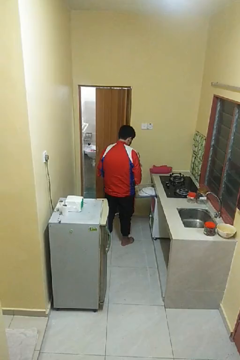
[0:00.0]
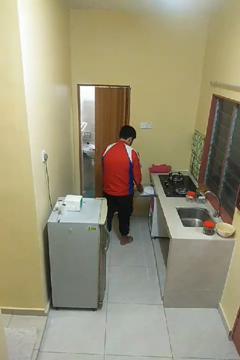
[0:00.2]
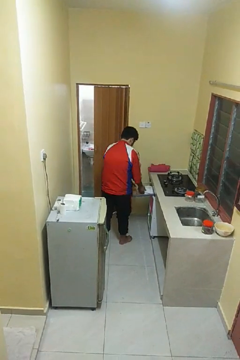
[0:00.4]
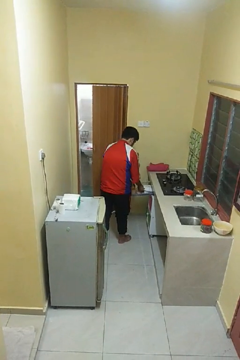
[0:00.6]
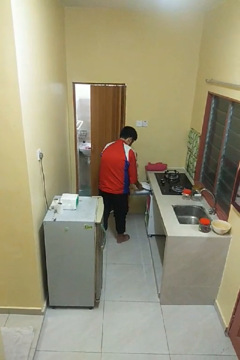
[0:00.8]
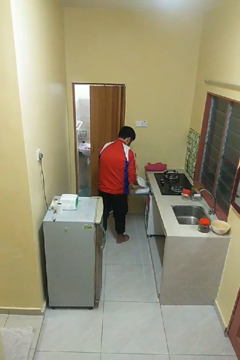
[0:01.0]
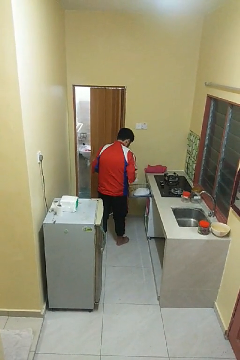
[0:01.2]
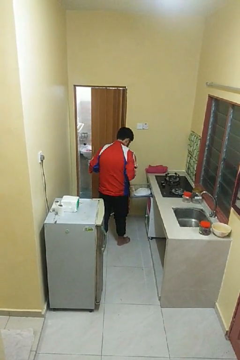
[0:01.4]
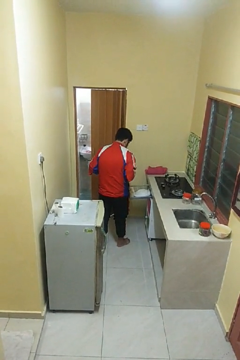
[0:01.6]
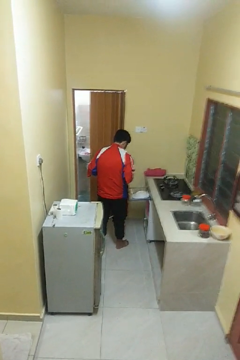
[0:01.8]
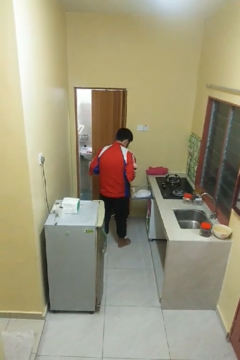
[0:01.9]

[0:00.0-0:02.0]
person takes object from kitchen drawer

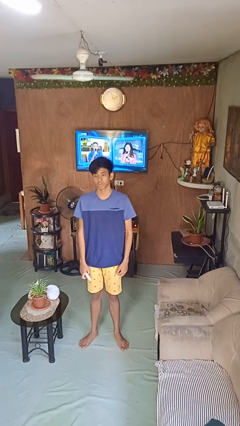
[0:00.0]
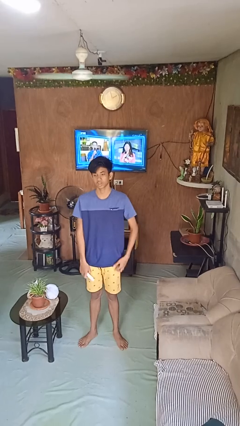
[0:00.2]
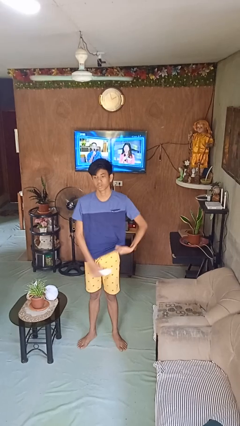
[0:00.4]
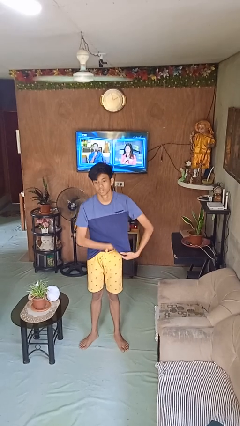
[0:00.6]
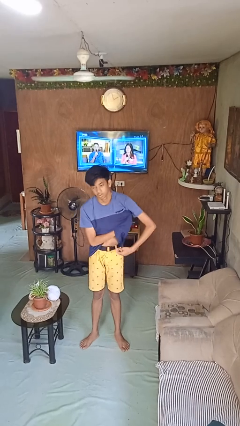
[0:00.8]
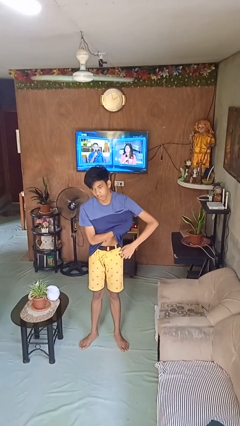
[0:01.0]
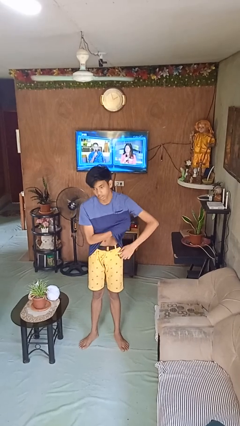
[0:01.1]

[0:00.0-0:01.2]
person applies deodorant

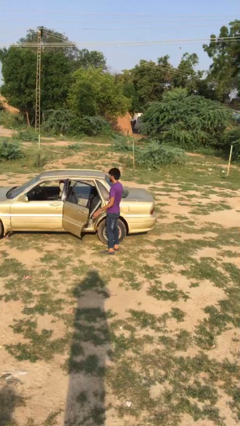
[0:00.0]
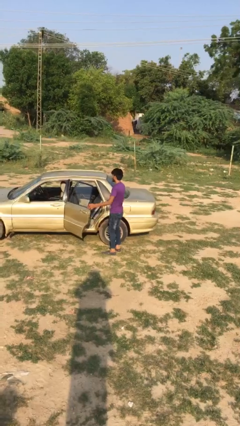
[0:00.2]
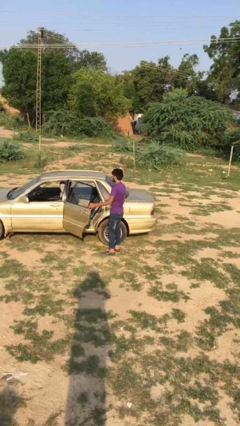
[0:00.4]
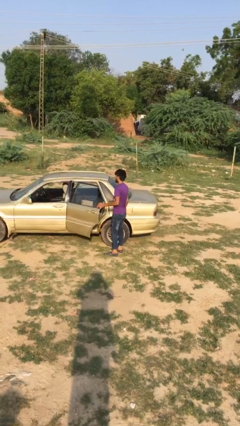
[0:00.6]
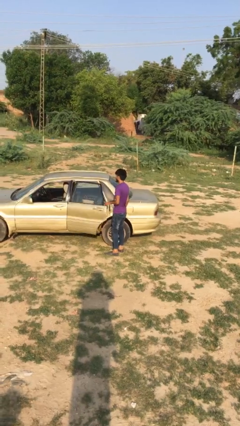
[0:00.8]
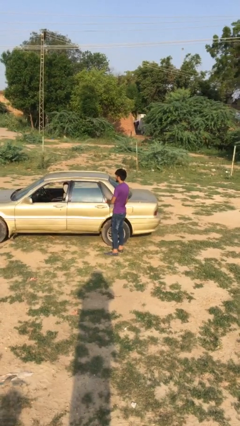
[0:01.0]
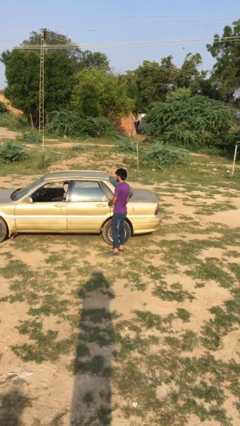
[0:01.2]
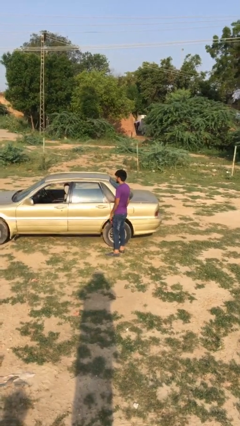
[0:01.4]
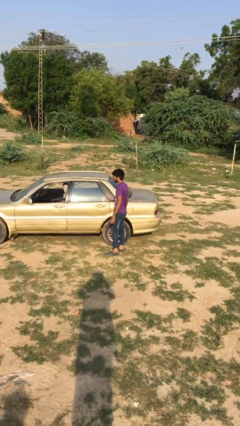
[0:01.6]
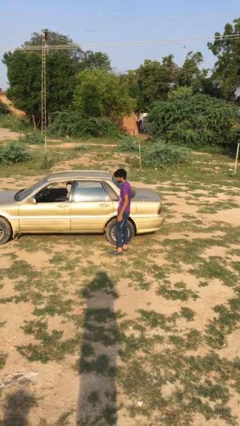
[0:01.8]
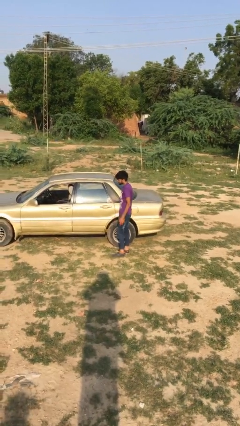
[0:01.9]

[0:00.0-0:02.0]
person closes car door

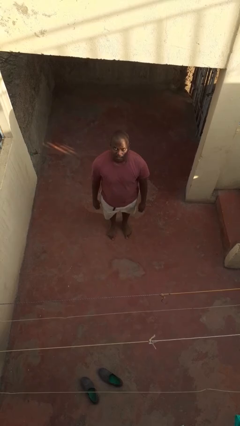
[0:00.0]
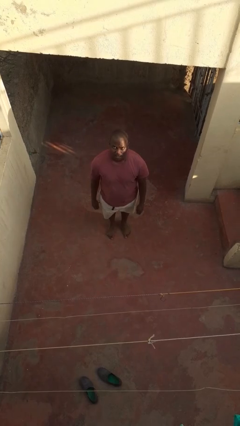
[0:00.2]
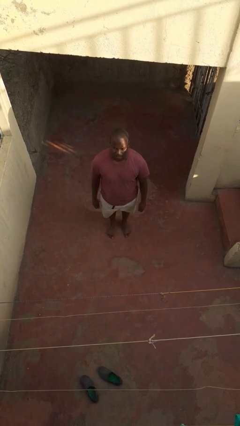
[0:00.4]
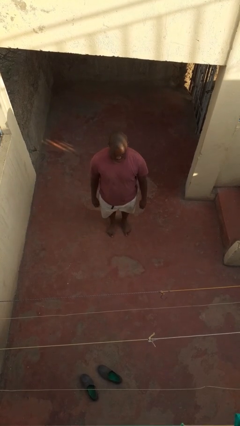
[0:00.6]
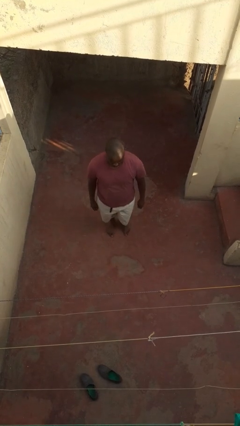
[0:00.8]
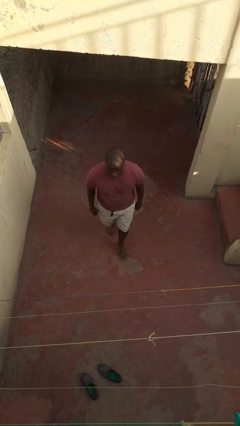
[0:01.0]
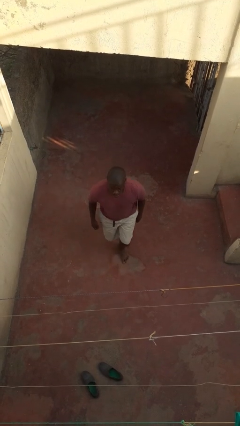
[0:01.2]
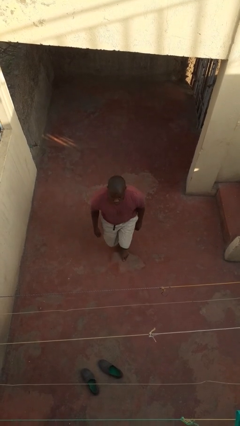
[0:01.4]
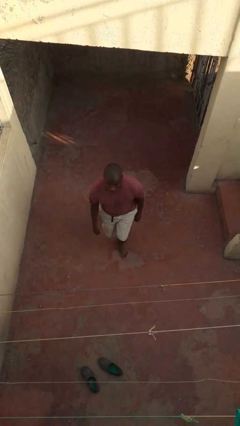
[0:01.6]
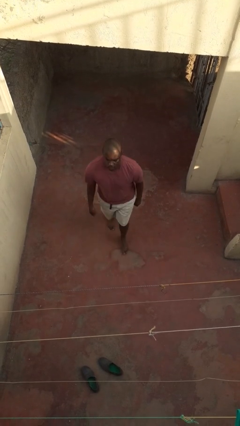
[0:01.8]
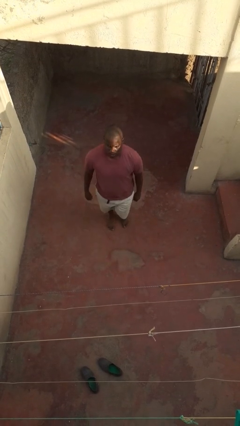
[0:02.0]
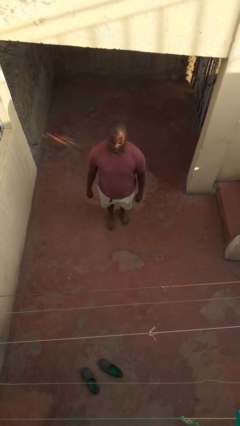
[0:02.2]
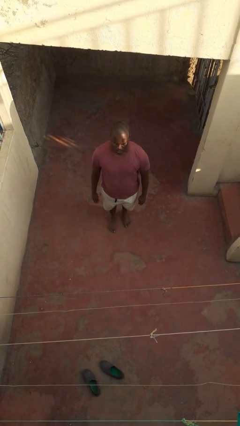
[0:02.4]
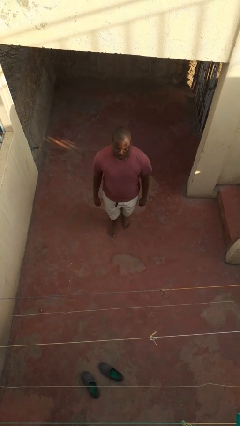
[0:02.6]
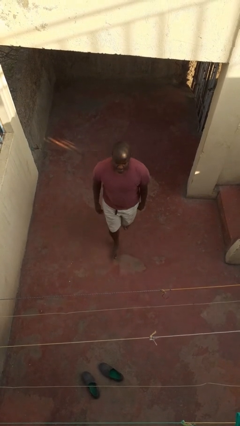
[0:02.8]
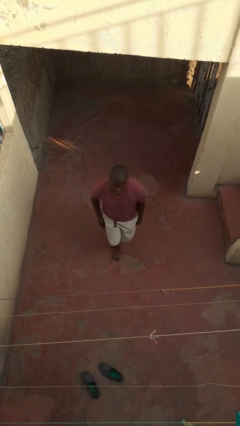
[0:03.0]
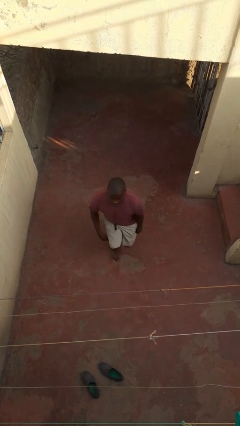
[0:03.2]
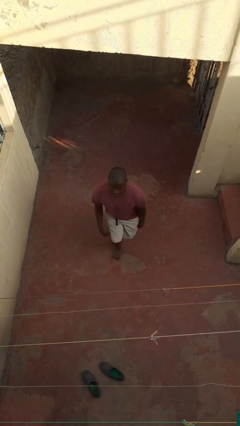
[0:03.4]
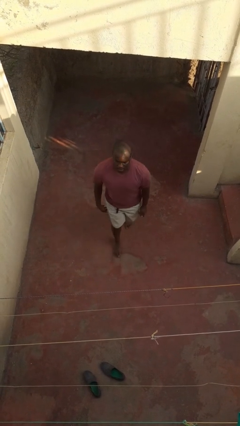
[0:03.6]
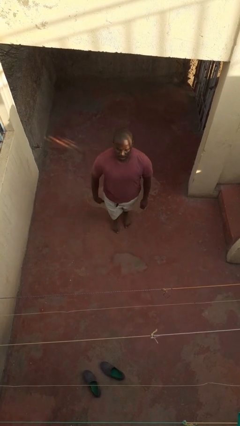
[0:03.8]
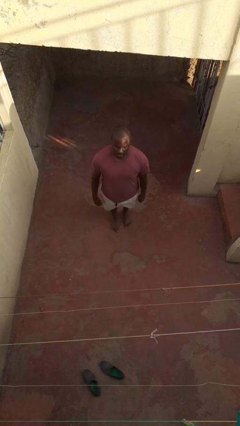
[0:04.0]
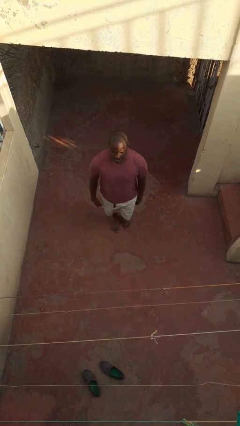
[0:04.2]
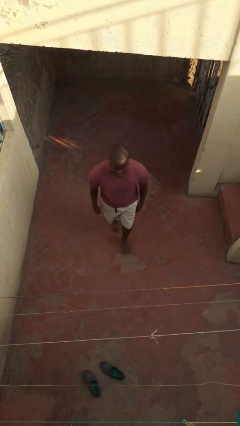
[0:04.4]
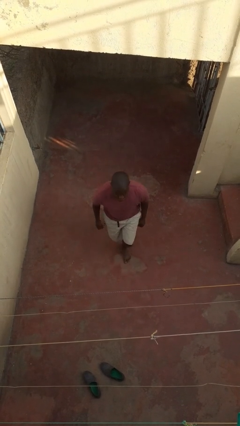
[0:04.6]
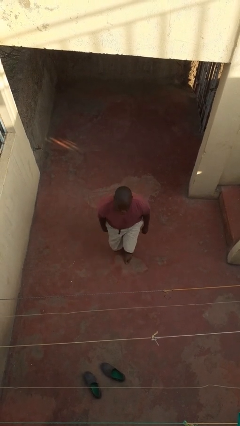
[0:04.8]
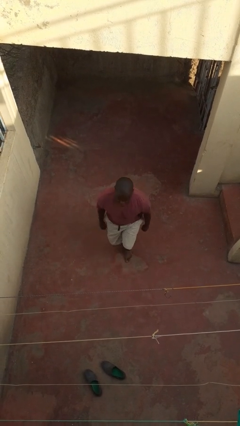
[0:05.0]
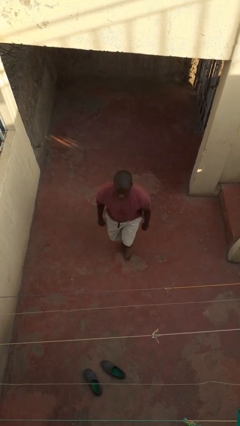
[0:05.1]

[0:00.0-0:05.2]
person exercises with lunges

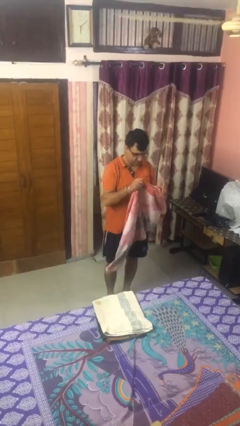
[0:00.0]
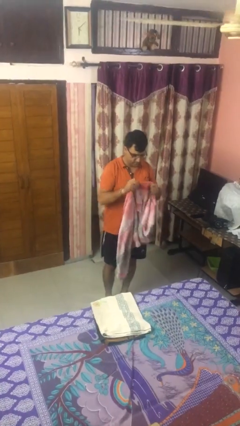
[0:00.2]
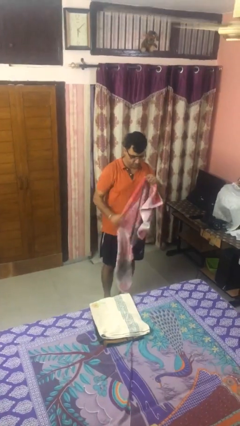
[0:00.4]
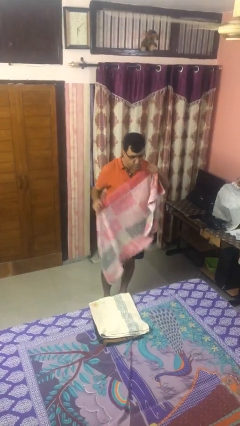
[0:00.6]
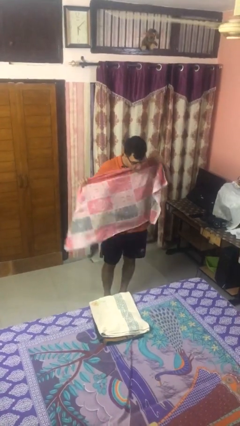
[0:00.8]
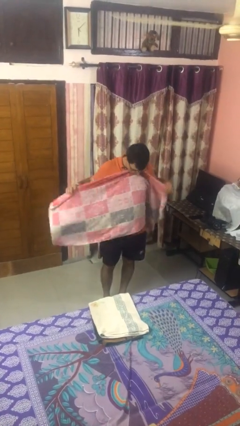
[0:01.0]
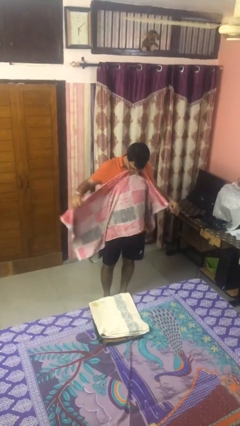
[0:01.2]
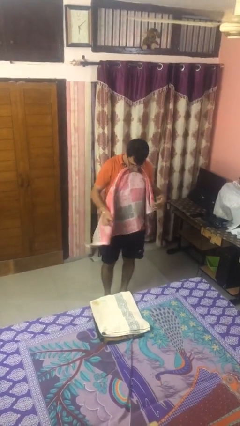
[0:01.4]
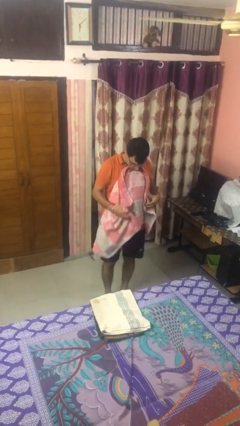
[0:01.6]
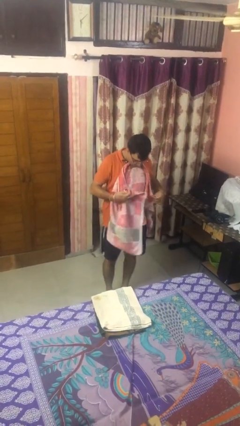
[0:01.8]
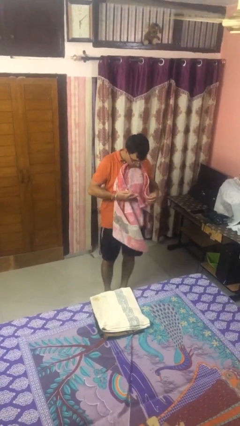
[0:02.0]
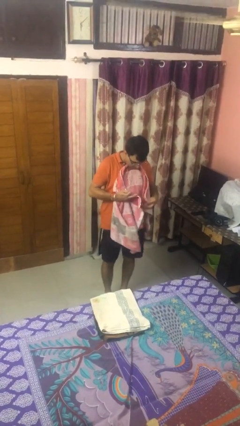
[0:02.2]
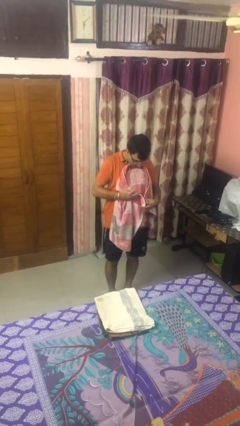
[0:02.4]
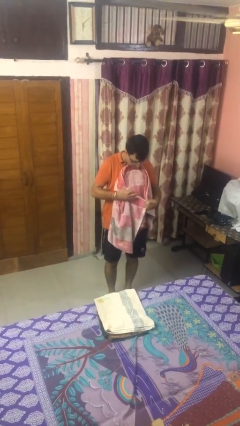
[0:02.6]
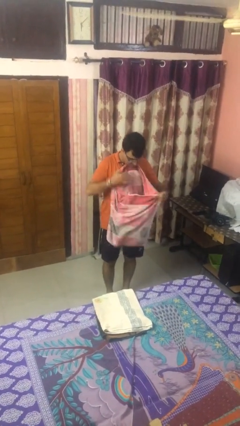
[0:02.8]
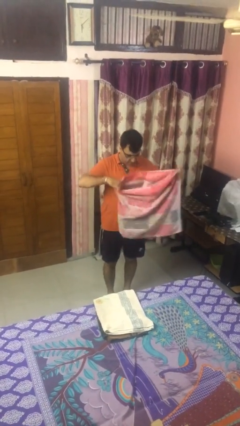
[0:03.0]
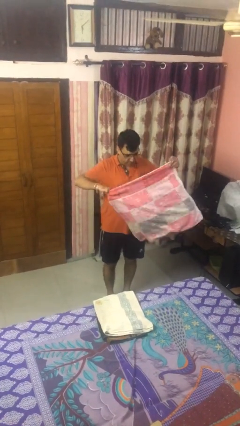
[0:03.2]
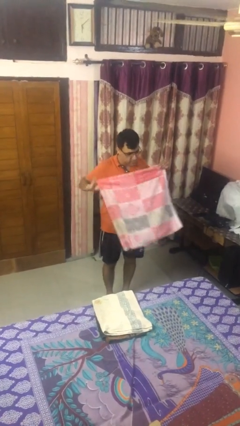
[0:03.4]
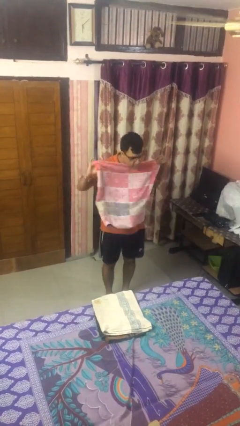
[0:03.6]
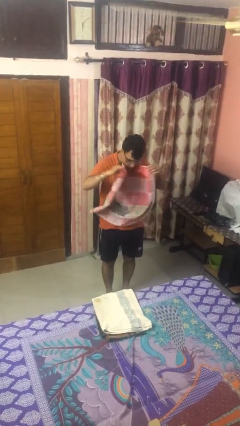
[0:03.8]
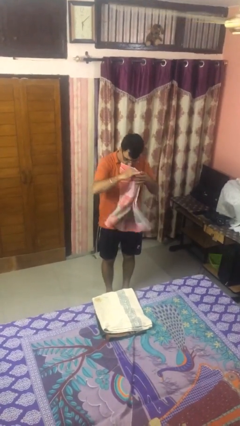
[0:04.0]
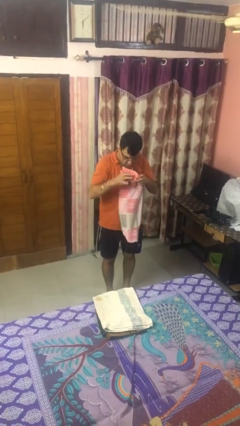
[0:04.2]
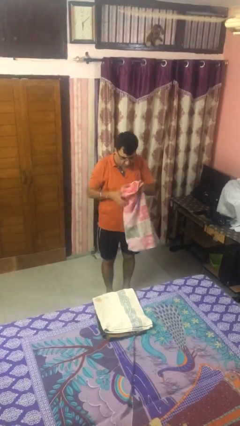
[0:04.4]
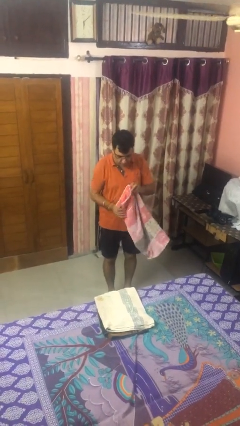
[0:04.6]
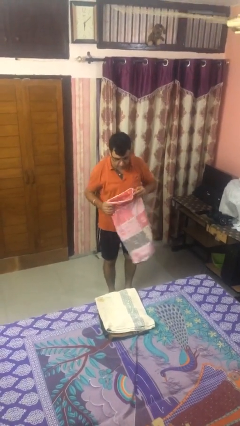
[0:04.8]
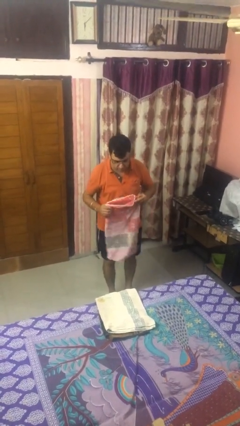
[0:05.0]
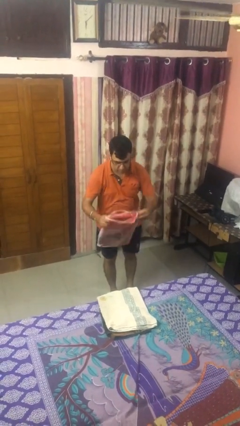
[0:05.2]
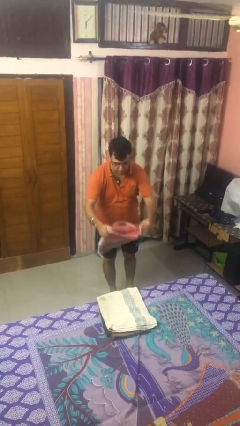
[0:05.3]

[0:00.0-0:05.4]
person folds towel

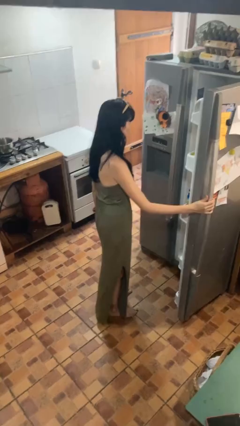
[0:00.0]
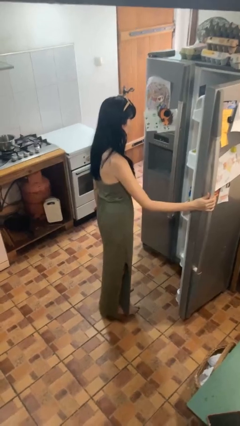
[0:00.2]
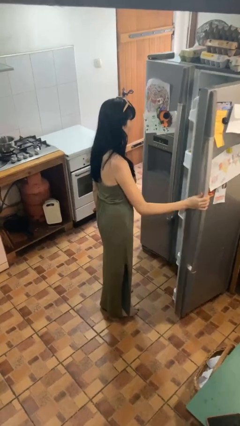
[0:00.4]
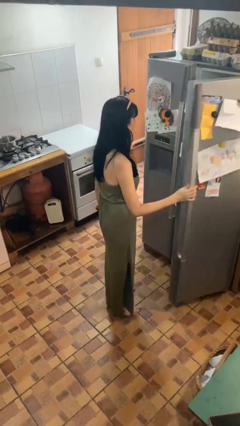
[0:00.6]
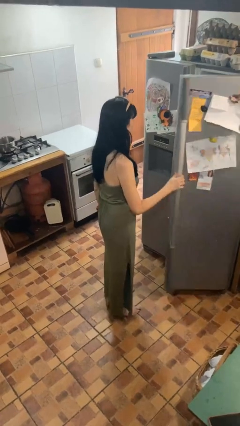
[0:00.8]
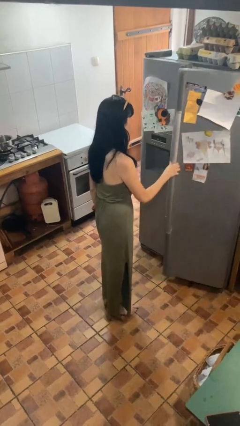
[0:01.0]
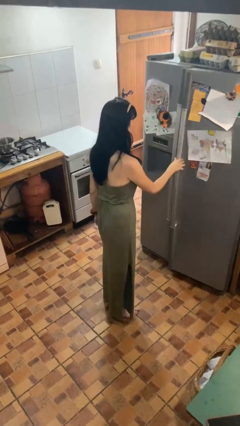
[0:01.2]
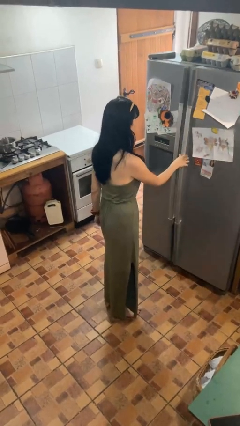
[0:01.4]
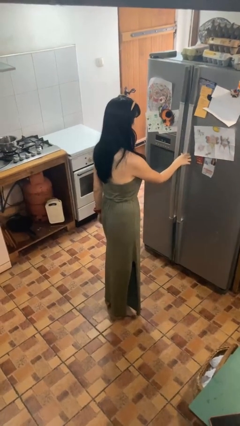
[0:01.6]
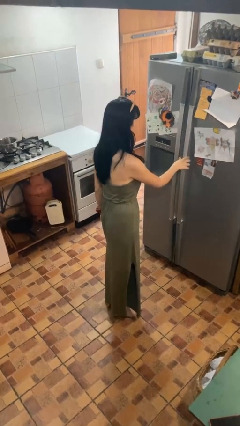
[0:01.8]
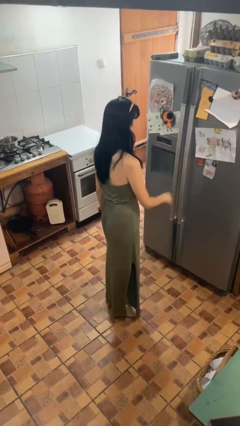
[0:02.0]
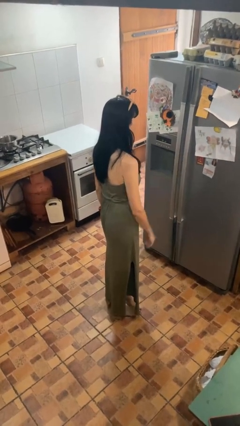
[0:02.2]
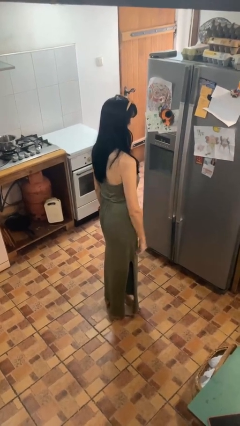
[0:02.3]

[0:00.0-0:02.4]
person closes refrigerator
